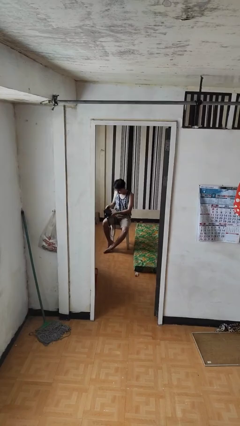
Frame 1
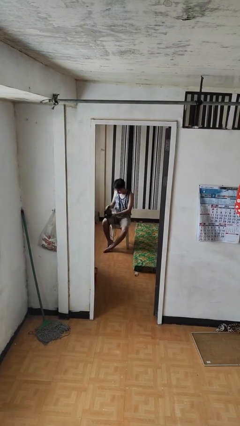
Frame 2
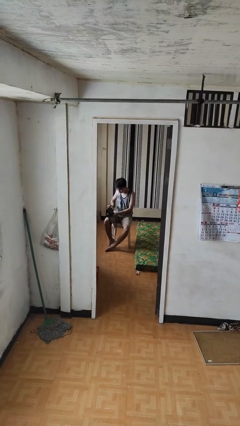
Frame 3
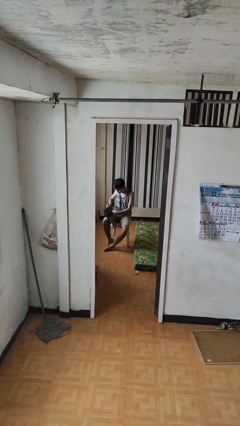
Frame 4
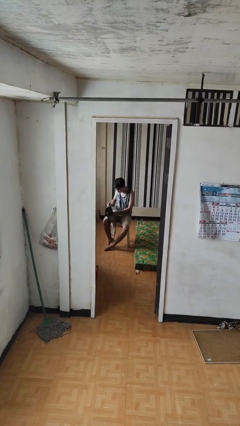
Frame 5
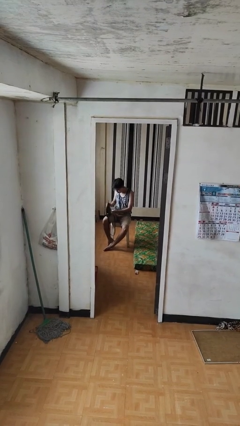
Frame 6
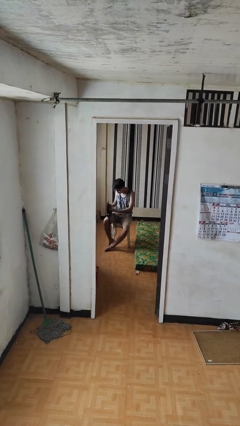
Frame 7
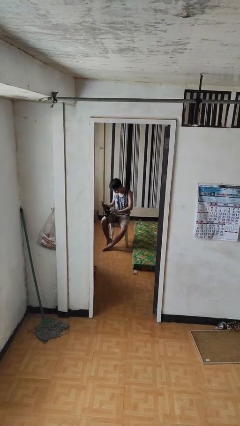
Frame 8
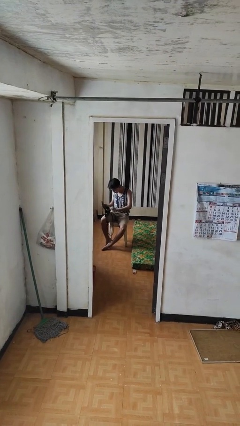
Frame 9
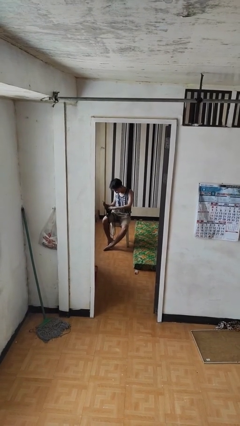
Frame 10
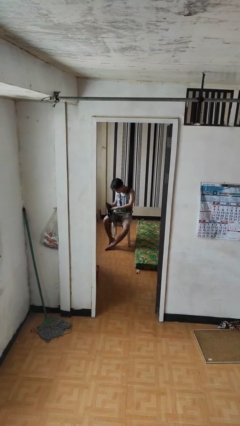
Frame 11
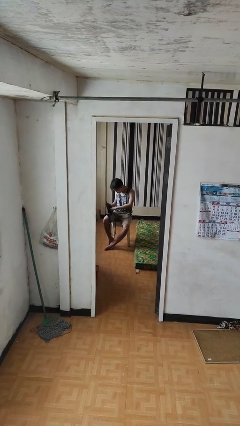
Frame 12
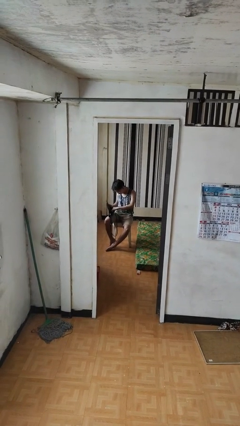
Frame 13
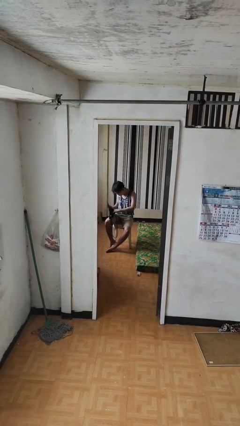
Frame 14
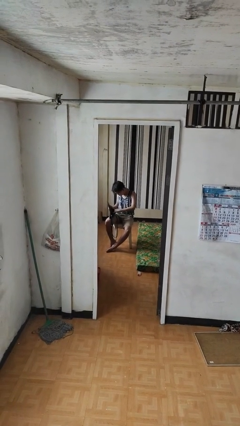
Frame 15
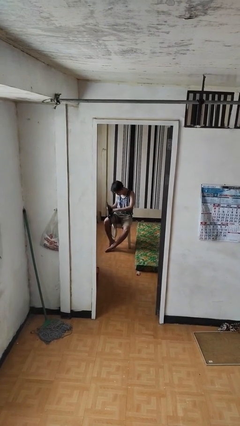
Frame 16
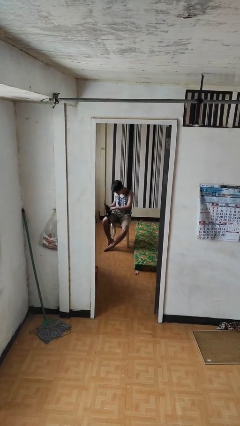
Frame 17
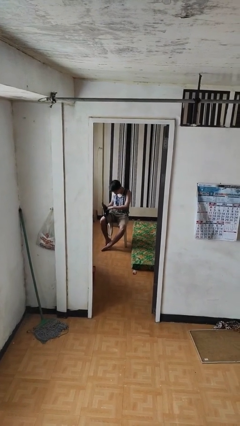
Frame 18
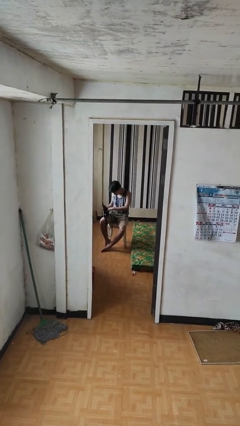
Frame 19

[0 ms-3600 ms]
person searches in purse

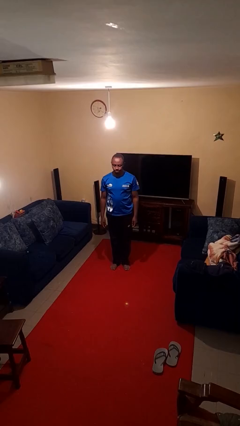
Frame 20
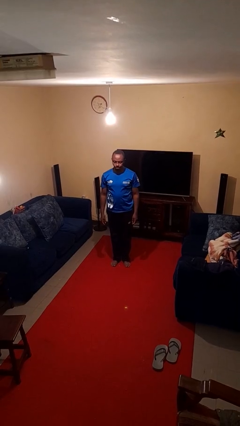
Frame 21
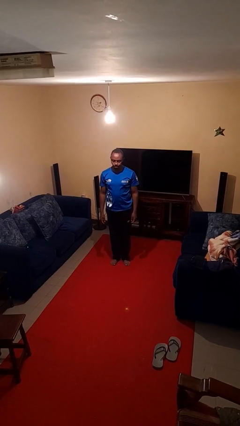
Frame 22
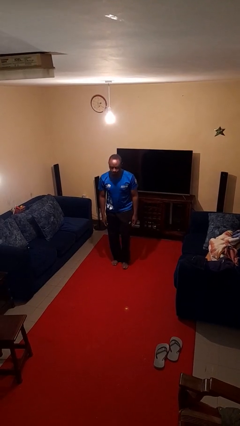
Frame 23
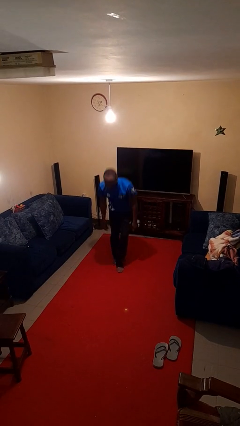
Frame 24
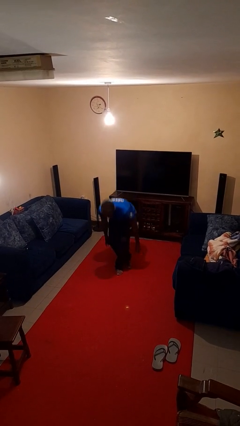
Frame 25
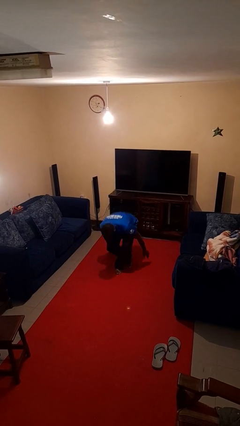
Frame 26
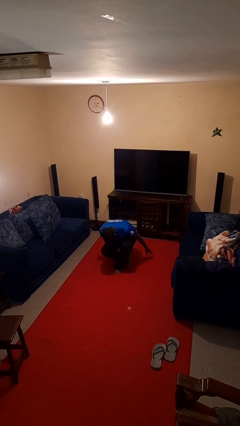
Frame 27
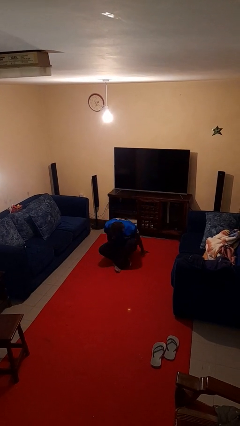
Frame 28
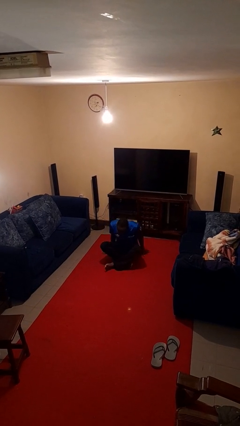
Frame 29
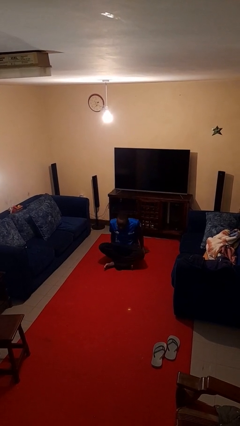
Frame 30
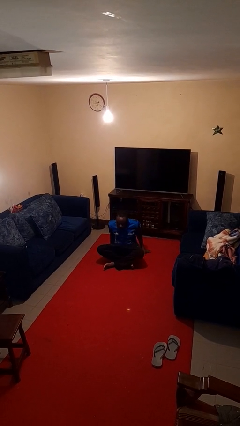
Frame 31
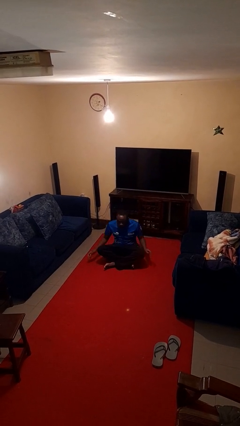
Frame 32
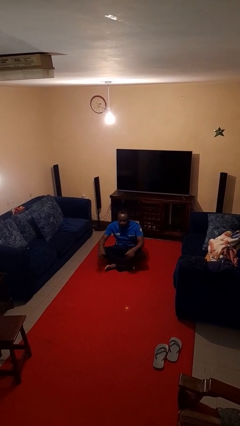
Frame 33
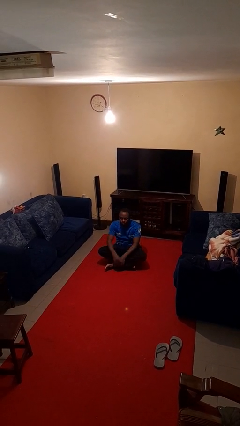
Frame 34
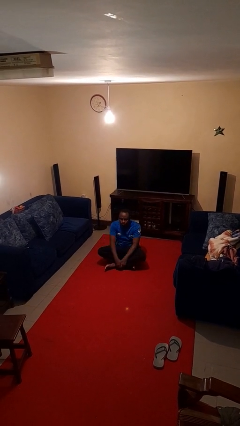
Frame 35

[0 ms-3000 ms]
person sits crisscross

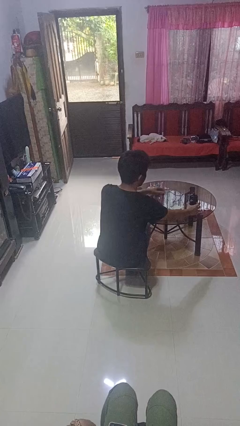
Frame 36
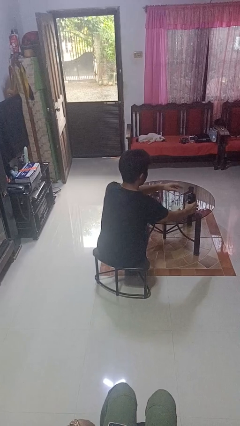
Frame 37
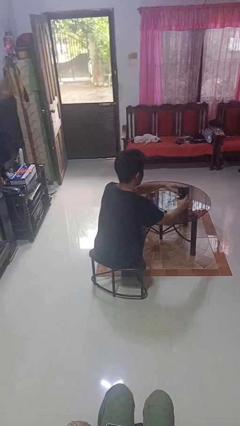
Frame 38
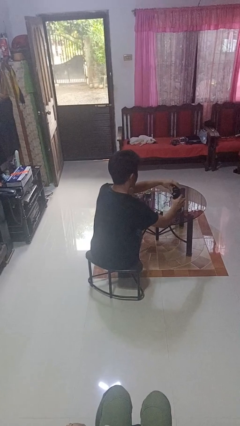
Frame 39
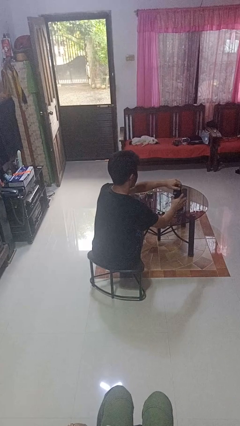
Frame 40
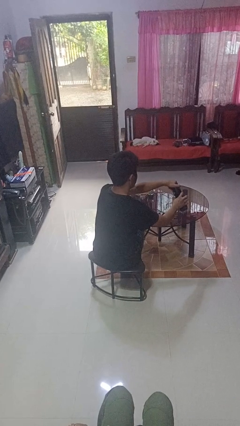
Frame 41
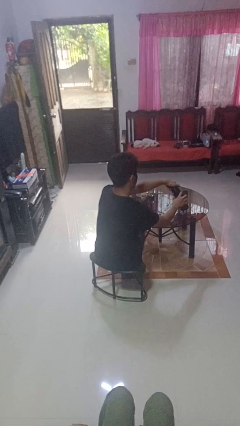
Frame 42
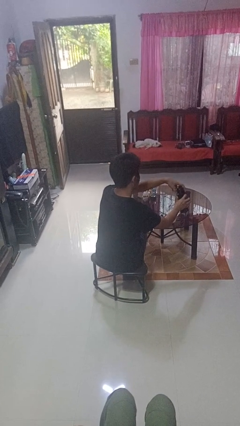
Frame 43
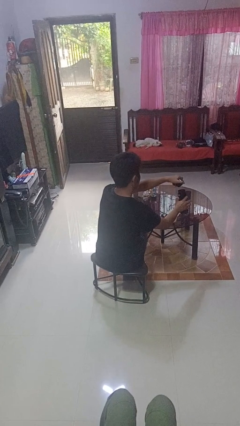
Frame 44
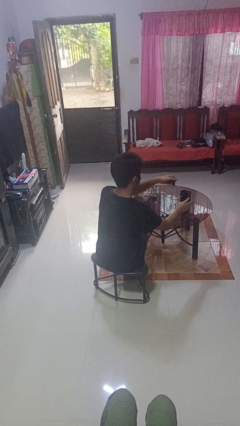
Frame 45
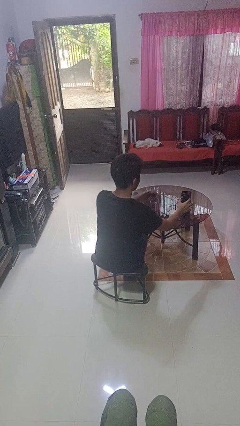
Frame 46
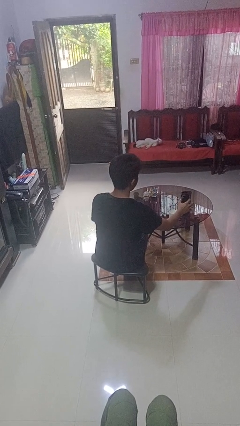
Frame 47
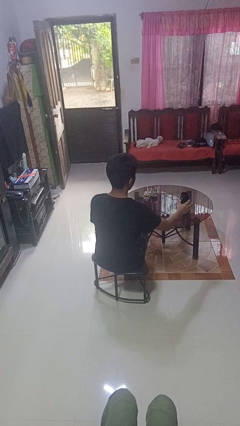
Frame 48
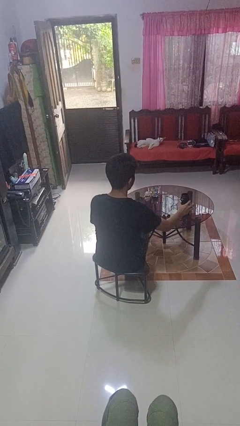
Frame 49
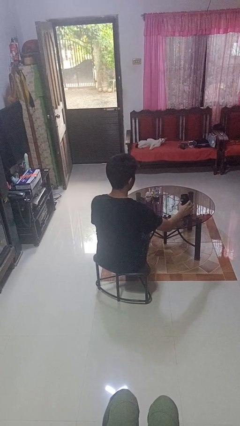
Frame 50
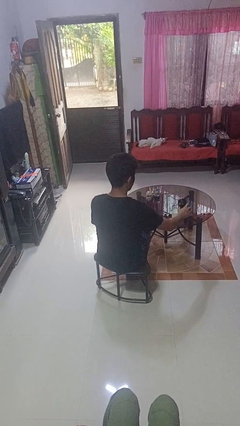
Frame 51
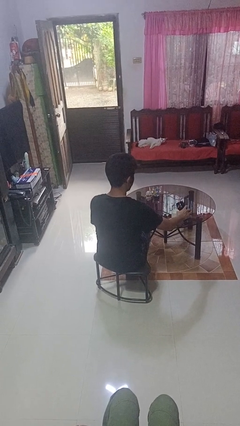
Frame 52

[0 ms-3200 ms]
person unscrews lid from bottle

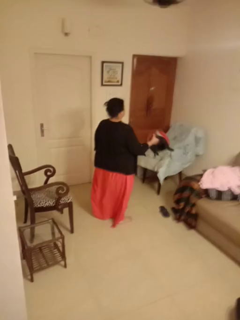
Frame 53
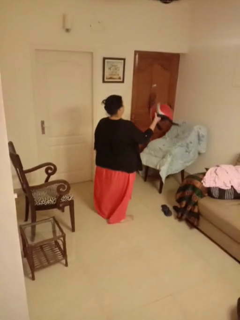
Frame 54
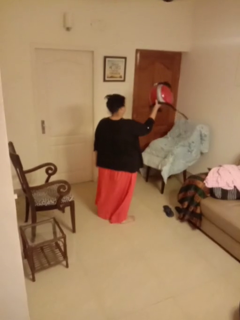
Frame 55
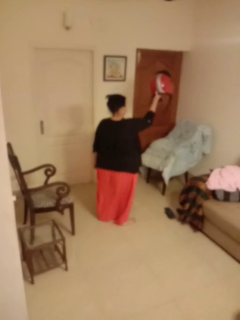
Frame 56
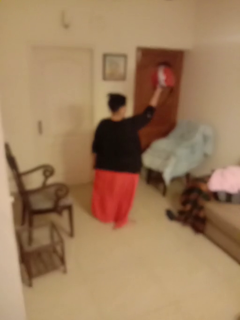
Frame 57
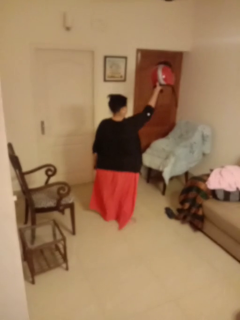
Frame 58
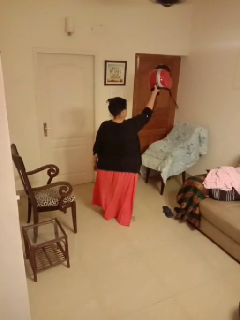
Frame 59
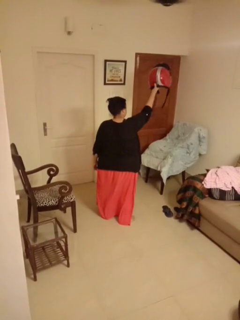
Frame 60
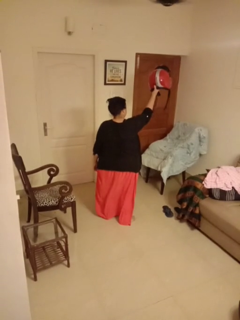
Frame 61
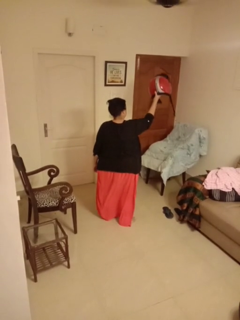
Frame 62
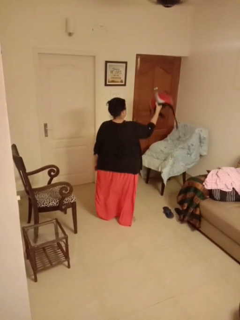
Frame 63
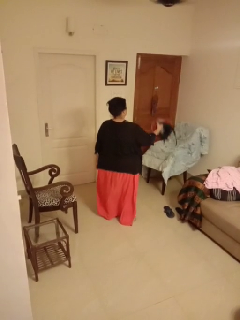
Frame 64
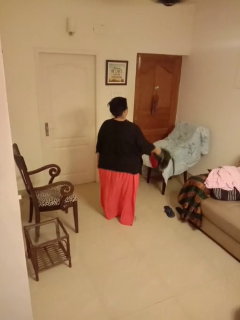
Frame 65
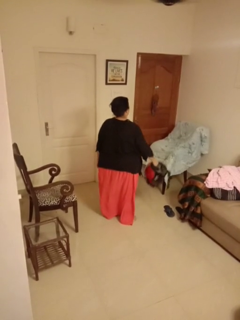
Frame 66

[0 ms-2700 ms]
person holds object above head

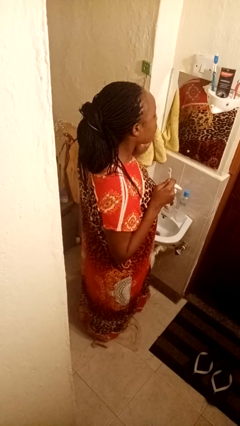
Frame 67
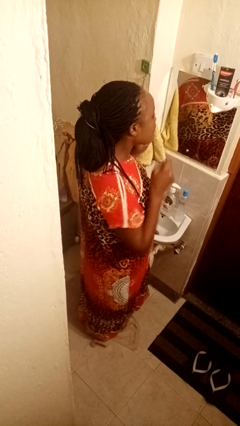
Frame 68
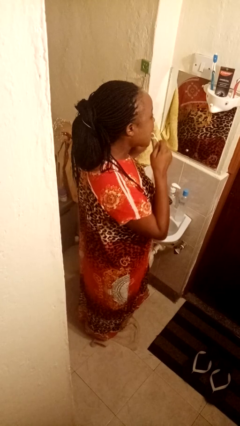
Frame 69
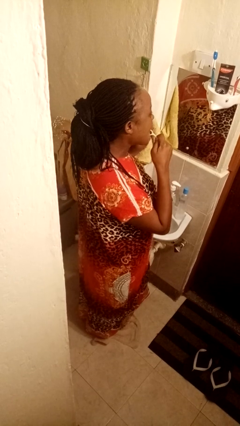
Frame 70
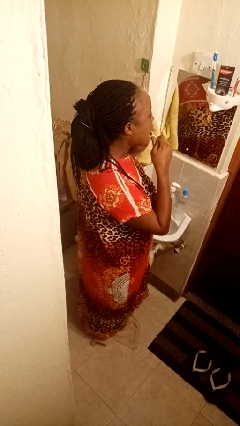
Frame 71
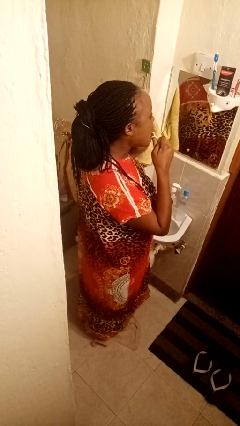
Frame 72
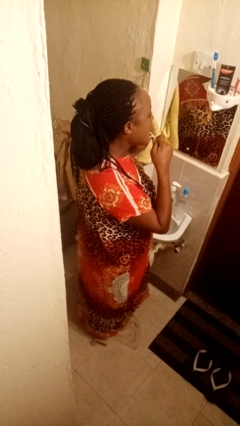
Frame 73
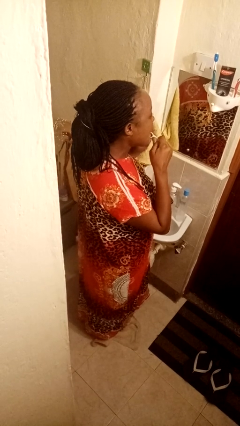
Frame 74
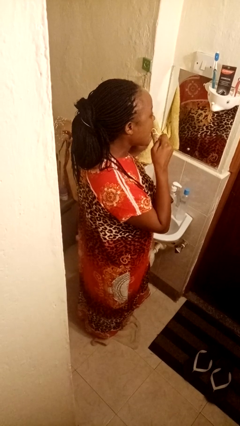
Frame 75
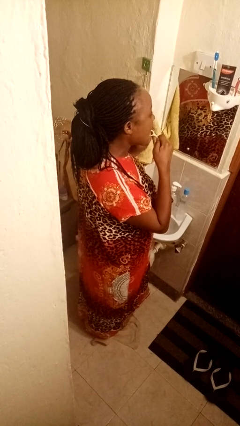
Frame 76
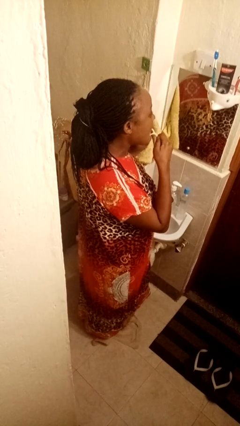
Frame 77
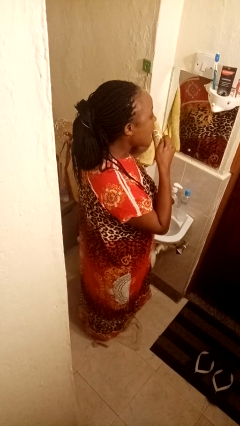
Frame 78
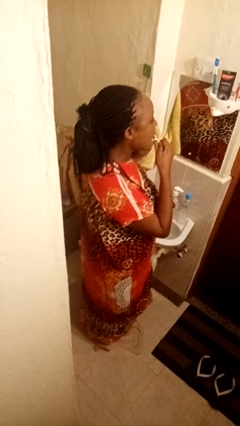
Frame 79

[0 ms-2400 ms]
person flosses

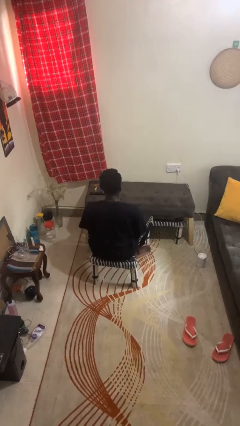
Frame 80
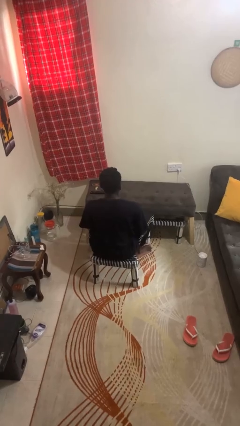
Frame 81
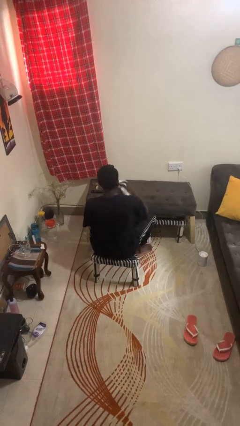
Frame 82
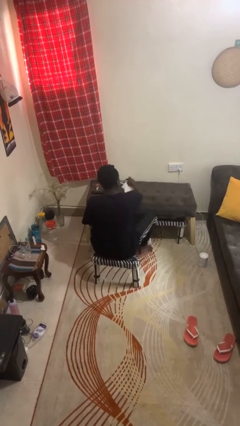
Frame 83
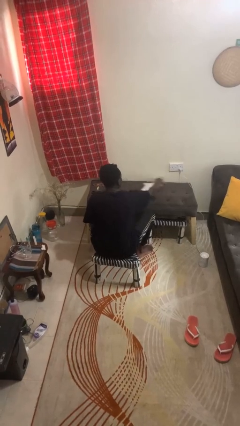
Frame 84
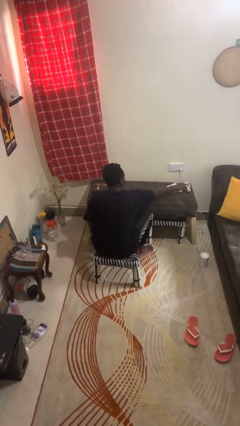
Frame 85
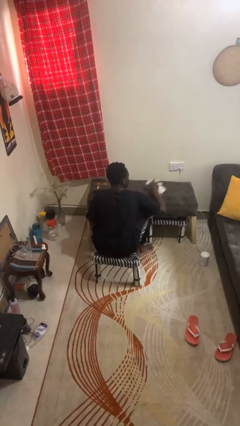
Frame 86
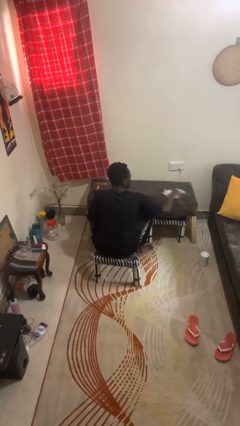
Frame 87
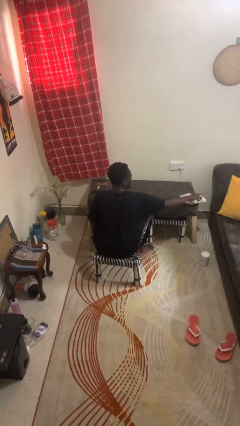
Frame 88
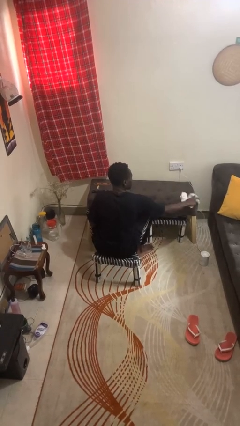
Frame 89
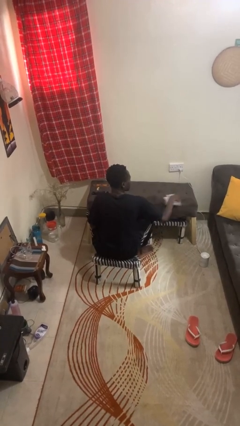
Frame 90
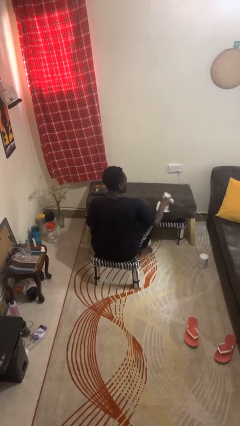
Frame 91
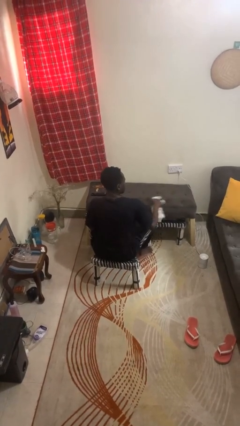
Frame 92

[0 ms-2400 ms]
person cleans table with rag

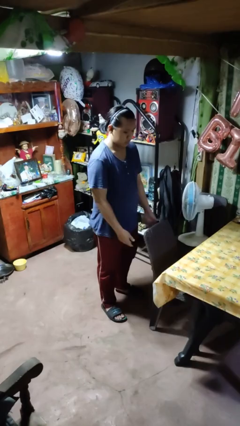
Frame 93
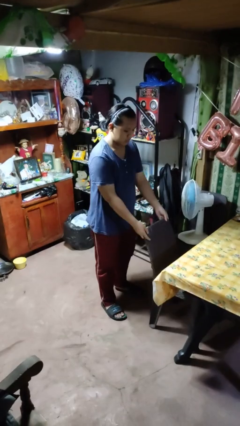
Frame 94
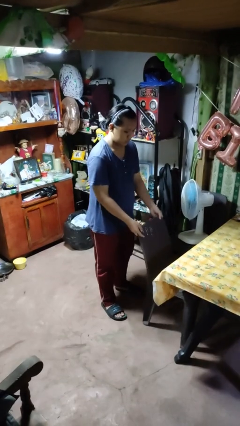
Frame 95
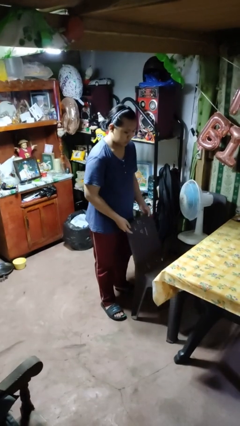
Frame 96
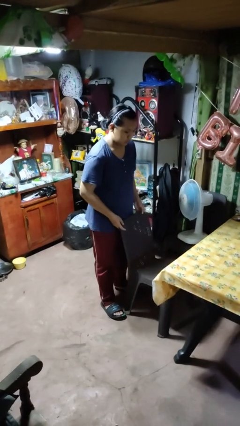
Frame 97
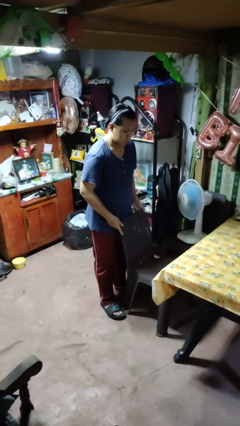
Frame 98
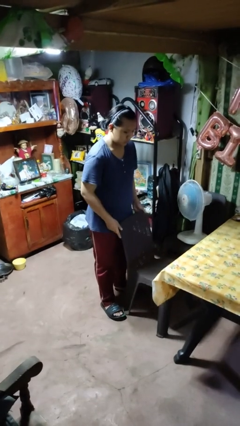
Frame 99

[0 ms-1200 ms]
person pulls out chair
